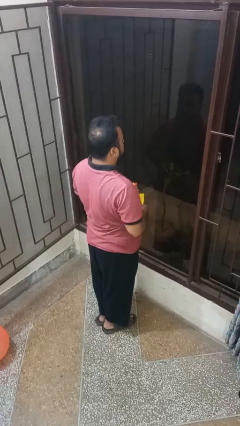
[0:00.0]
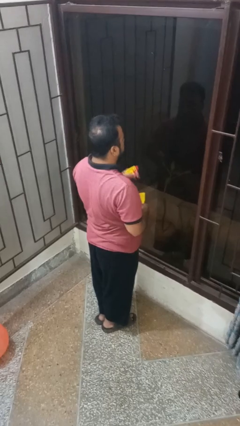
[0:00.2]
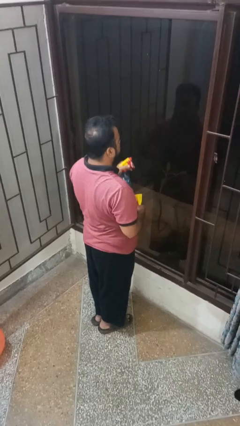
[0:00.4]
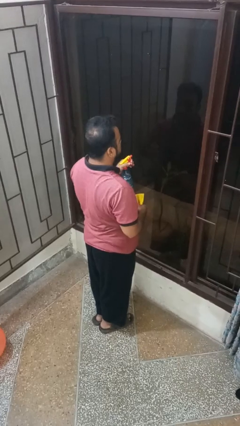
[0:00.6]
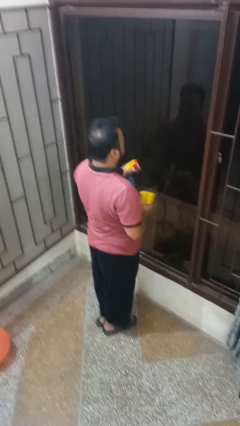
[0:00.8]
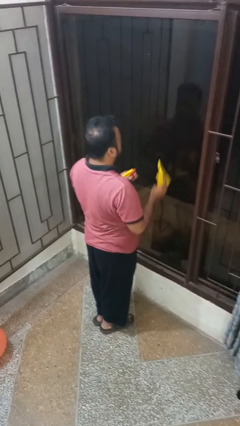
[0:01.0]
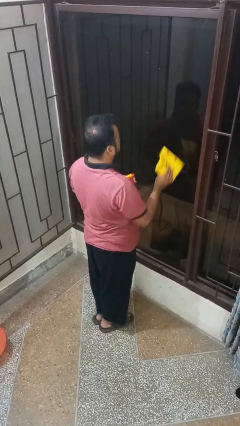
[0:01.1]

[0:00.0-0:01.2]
person sprays from bottle

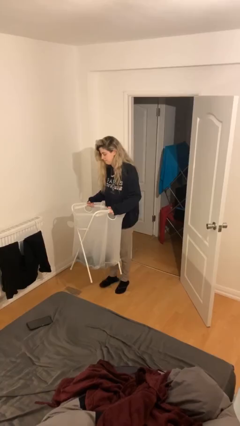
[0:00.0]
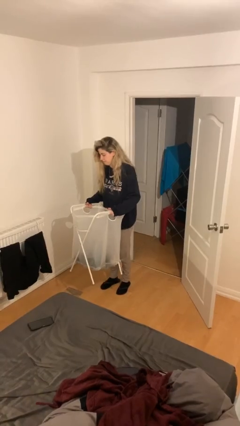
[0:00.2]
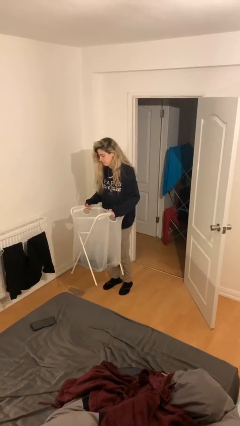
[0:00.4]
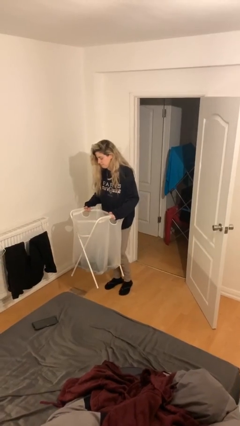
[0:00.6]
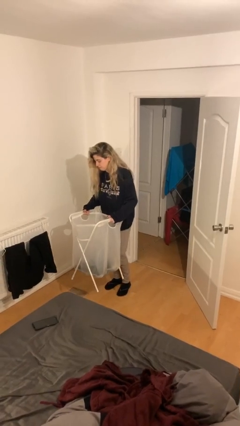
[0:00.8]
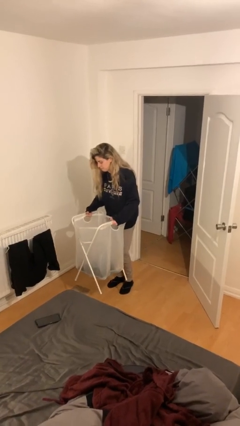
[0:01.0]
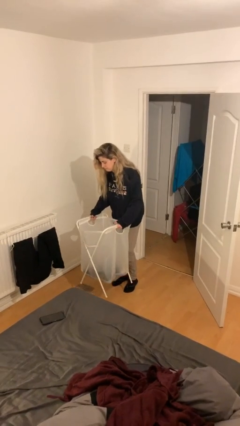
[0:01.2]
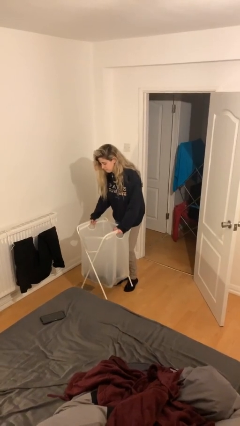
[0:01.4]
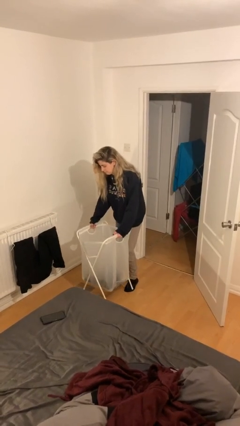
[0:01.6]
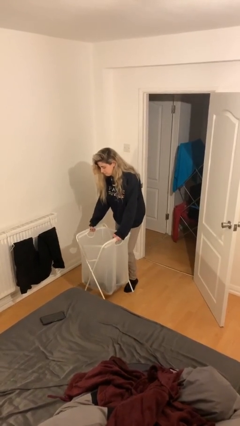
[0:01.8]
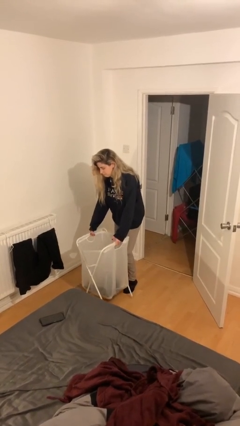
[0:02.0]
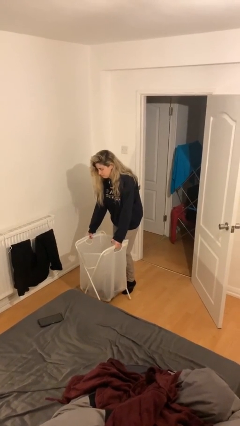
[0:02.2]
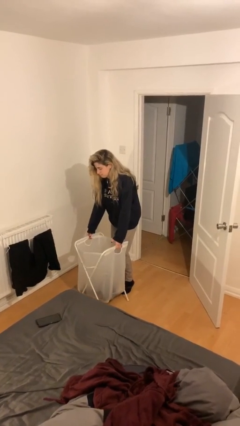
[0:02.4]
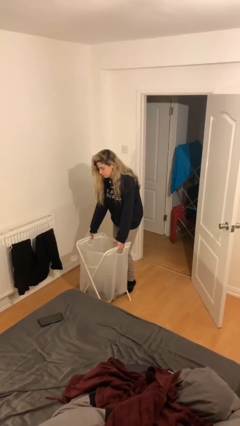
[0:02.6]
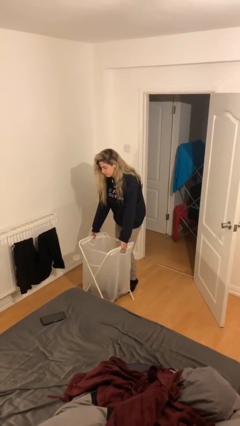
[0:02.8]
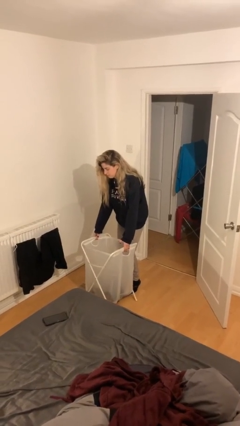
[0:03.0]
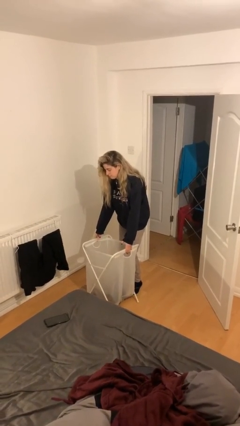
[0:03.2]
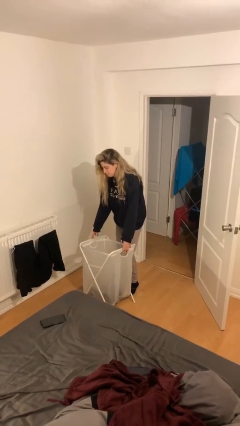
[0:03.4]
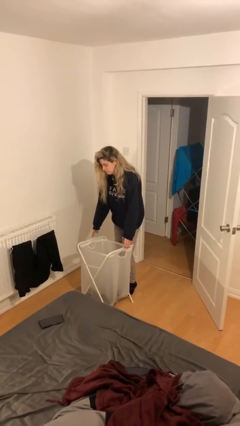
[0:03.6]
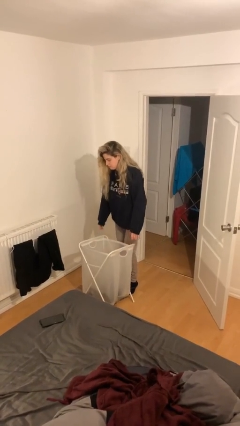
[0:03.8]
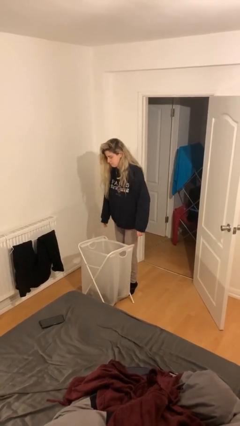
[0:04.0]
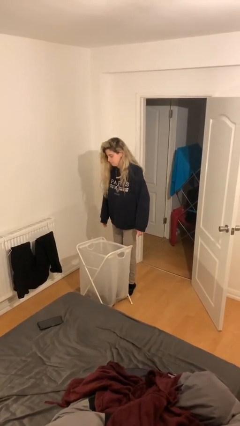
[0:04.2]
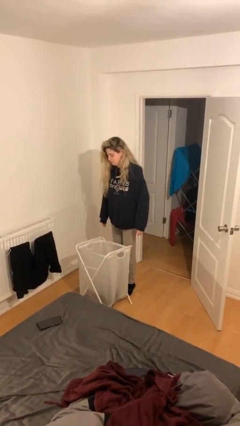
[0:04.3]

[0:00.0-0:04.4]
person puts down object on floor

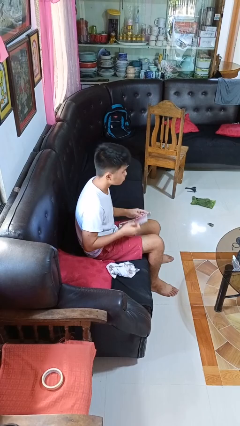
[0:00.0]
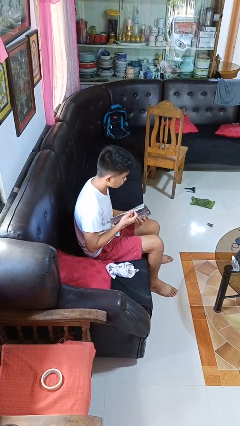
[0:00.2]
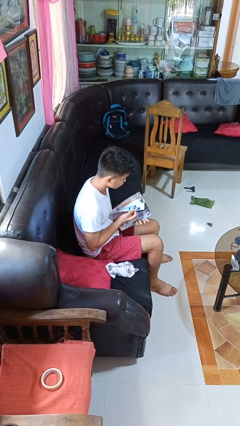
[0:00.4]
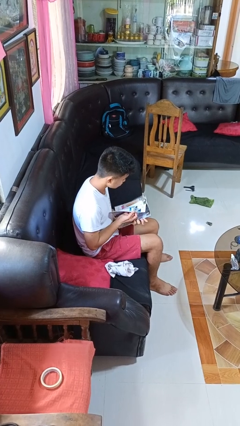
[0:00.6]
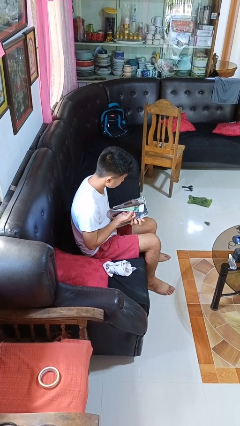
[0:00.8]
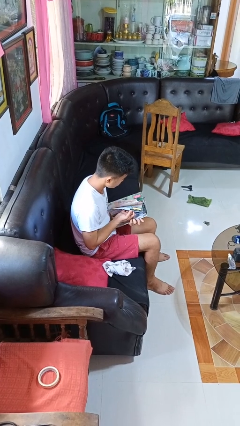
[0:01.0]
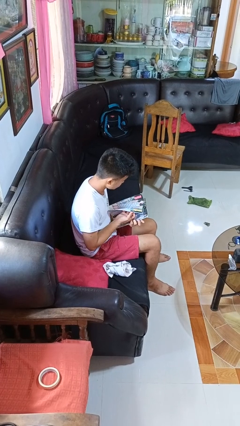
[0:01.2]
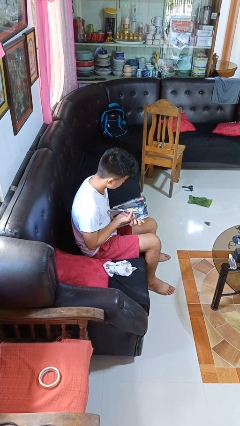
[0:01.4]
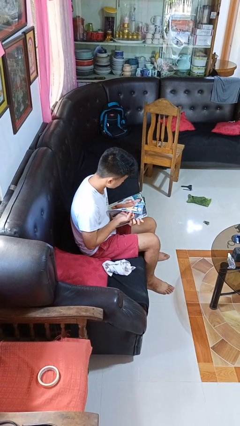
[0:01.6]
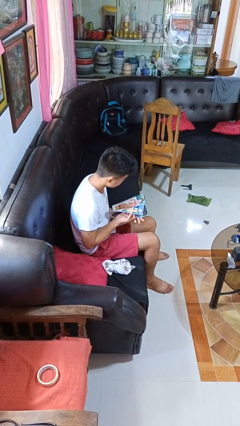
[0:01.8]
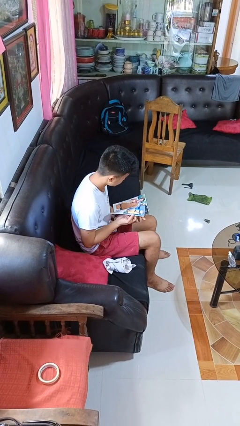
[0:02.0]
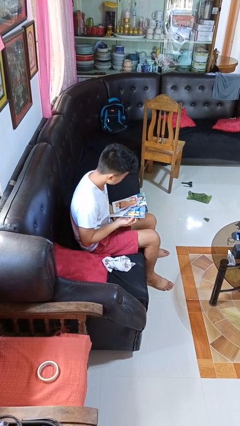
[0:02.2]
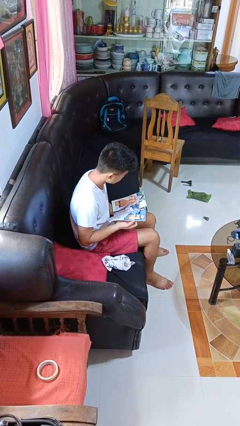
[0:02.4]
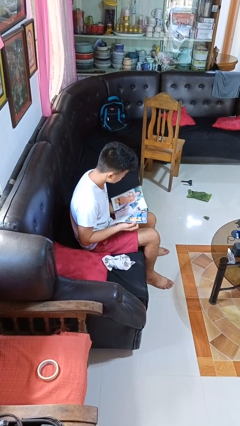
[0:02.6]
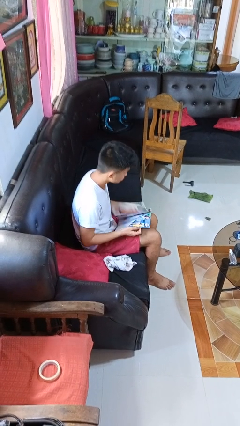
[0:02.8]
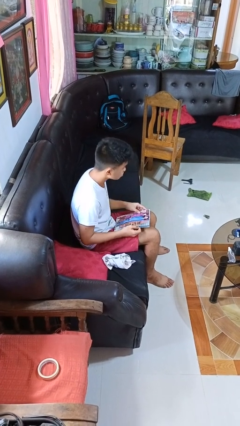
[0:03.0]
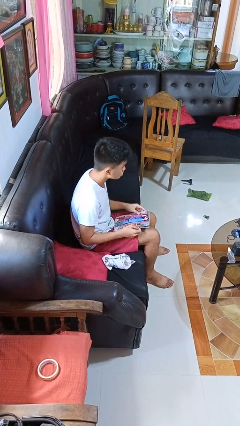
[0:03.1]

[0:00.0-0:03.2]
person reads magazine

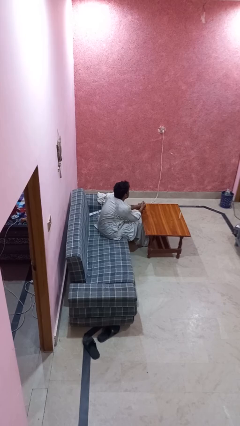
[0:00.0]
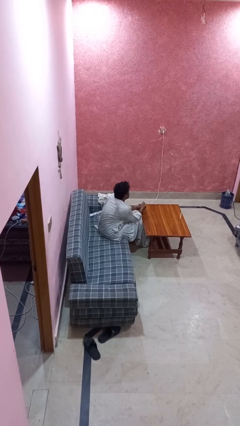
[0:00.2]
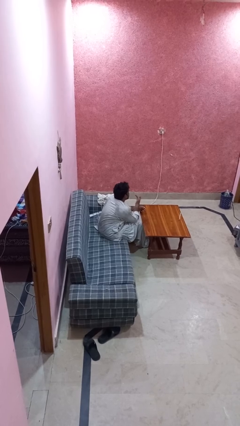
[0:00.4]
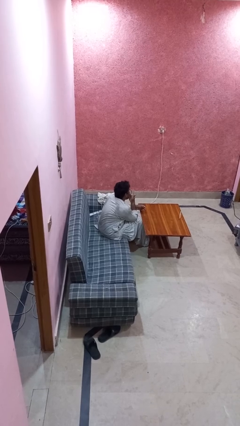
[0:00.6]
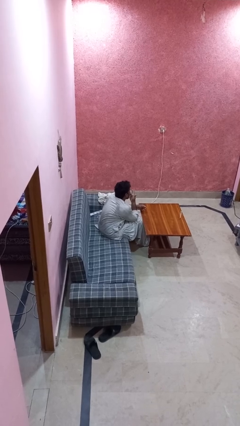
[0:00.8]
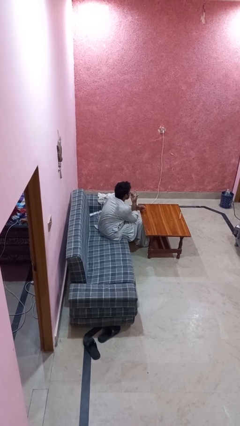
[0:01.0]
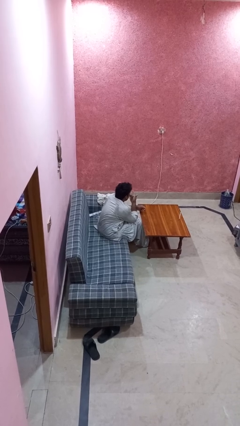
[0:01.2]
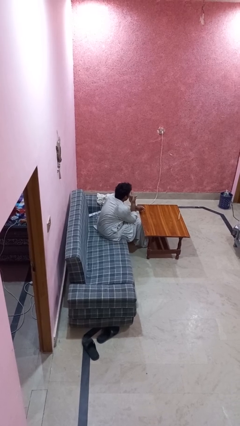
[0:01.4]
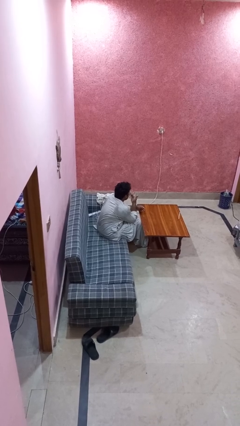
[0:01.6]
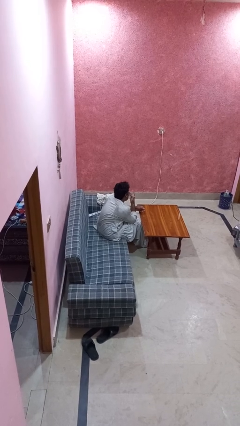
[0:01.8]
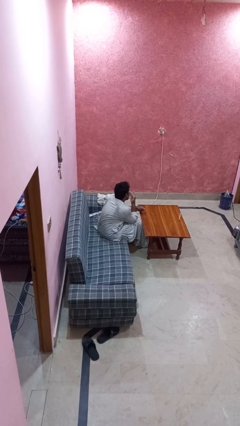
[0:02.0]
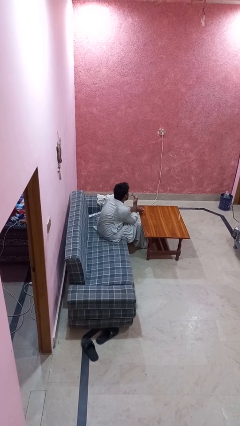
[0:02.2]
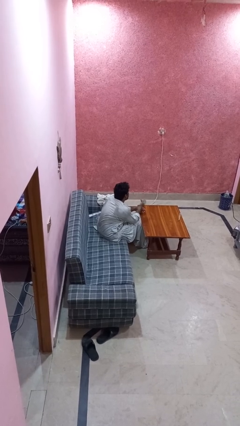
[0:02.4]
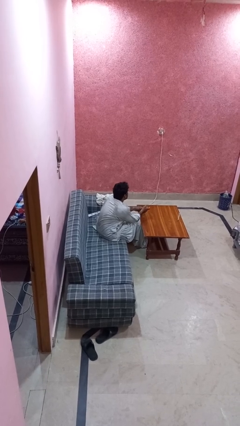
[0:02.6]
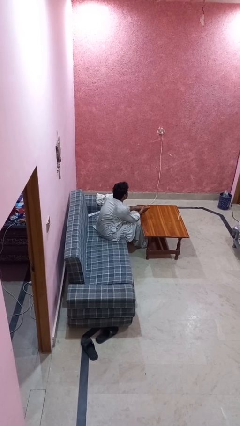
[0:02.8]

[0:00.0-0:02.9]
person licks fingers

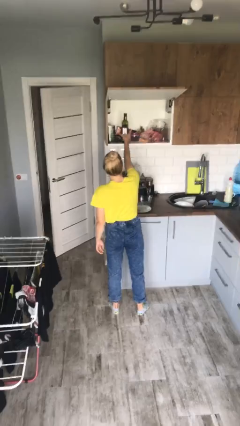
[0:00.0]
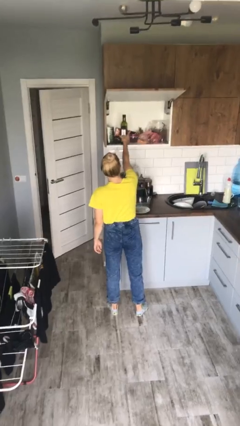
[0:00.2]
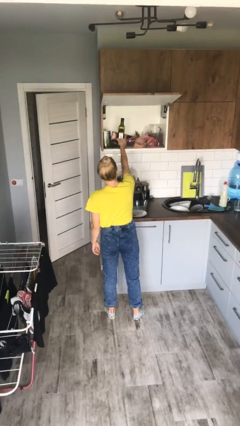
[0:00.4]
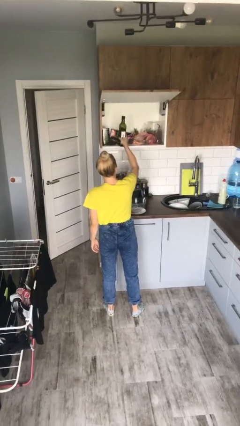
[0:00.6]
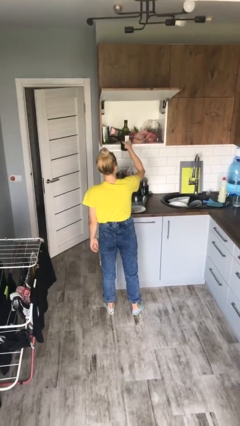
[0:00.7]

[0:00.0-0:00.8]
person picks up object from shelf

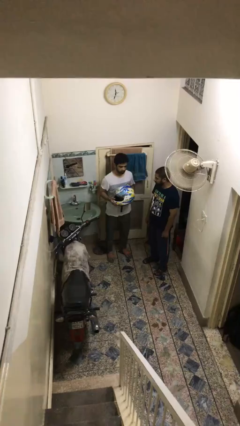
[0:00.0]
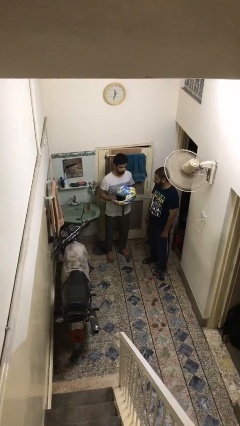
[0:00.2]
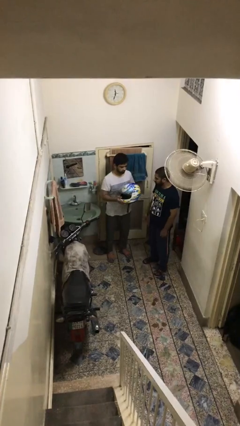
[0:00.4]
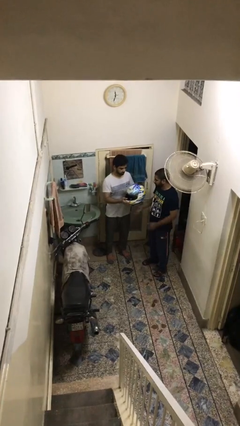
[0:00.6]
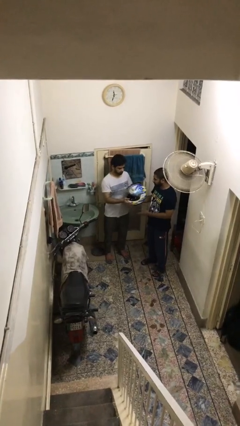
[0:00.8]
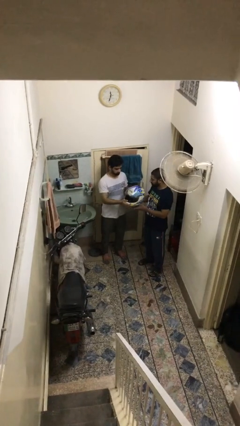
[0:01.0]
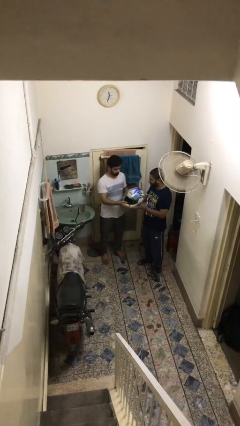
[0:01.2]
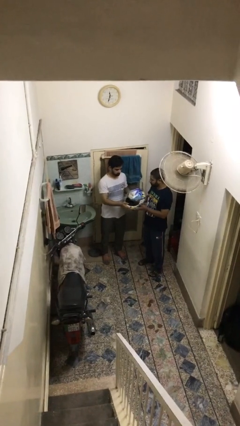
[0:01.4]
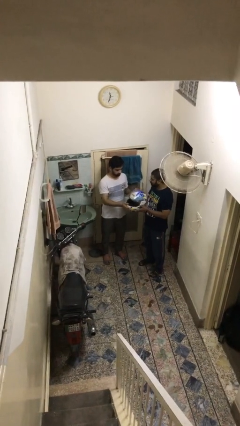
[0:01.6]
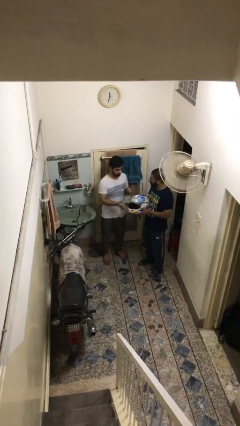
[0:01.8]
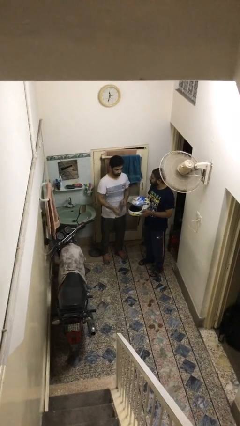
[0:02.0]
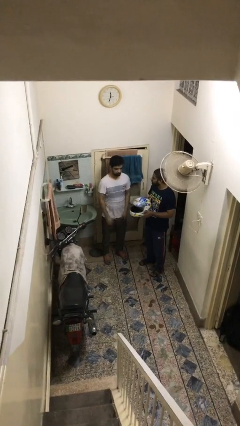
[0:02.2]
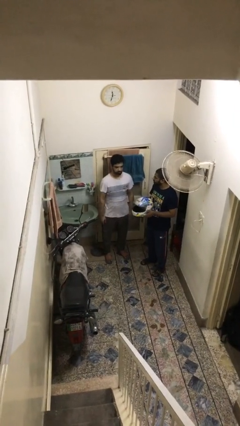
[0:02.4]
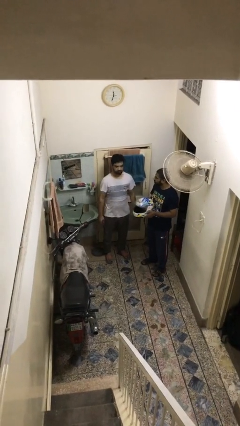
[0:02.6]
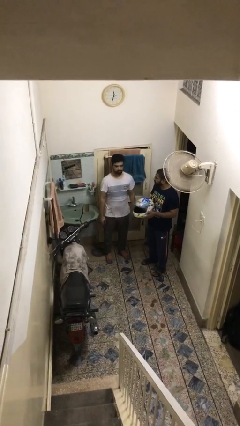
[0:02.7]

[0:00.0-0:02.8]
person transfers object to person

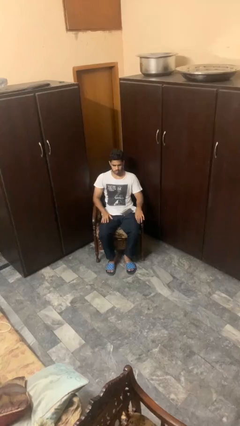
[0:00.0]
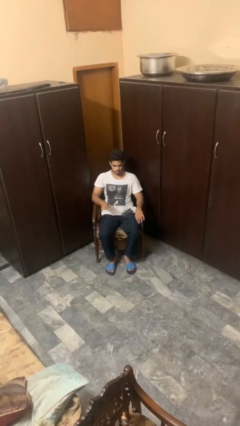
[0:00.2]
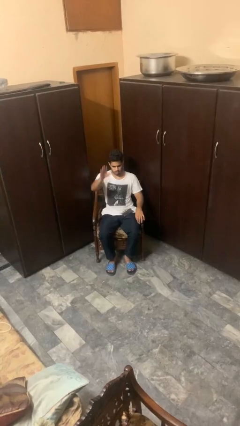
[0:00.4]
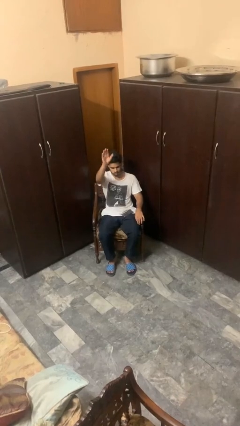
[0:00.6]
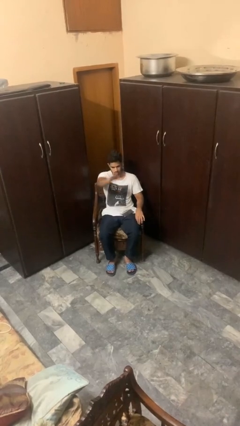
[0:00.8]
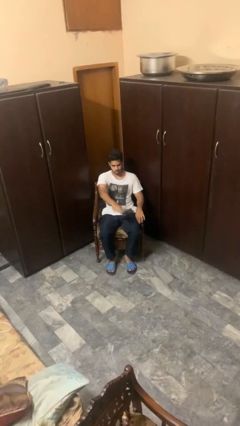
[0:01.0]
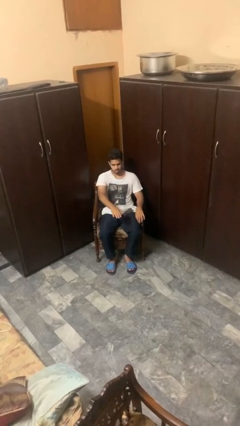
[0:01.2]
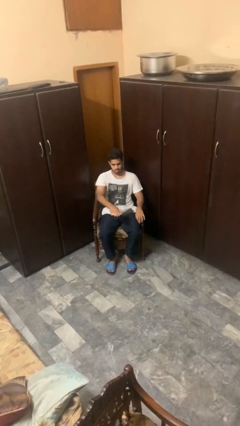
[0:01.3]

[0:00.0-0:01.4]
person gestures swipe down

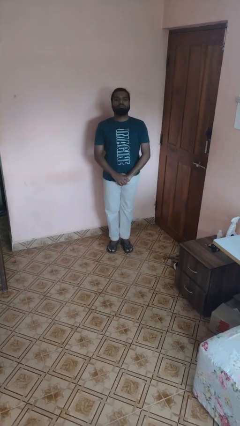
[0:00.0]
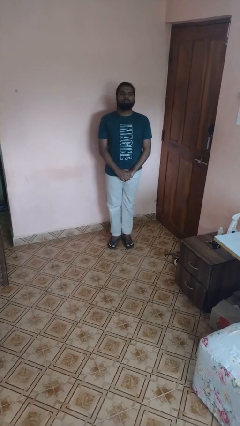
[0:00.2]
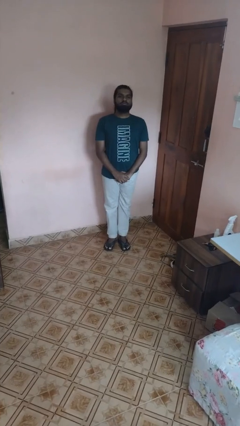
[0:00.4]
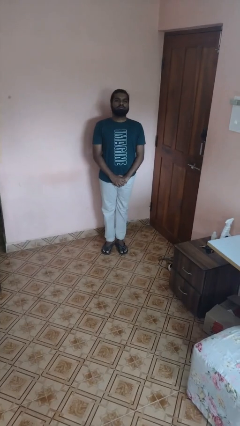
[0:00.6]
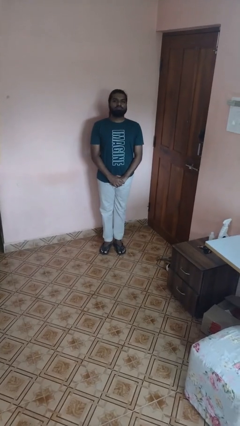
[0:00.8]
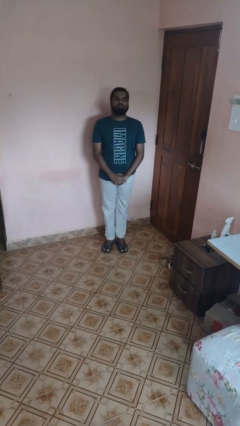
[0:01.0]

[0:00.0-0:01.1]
person stands up from floor
